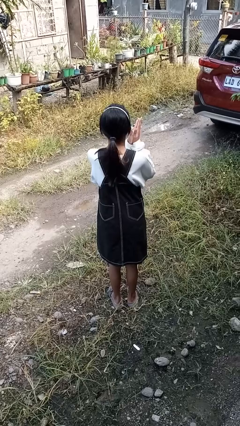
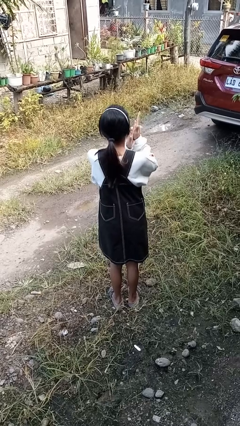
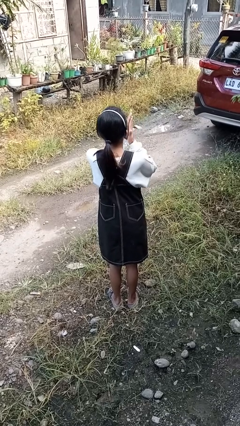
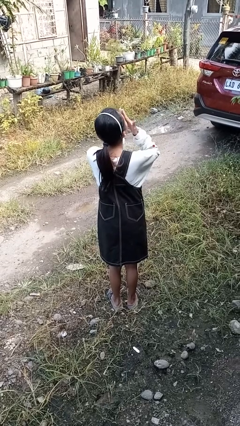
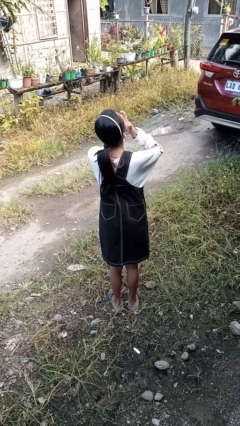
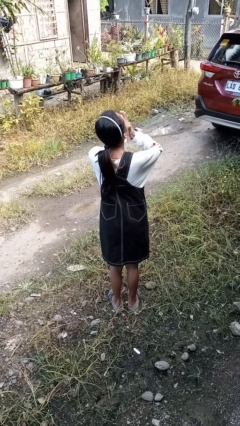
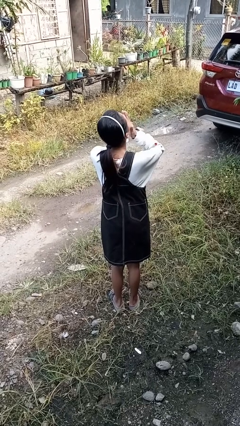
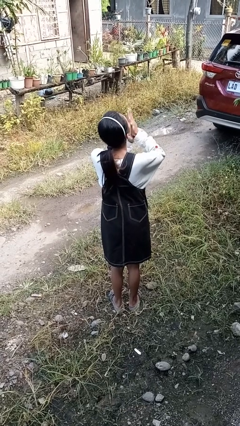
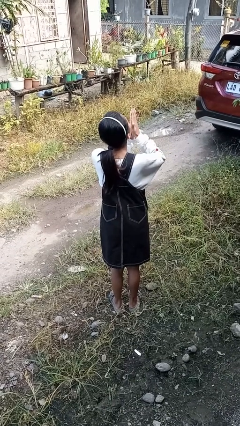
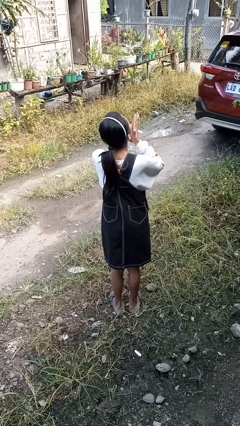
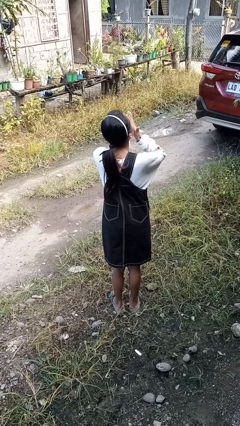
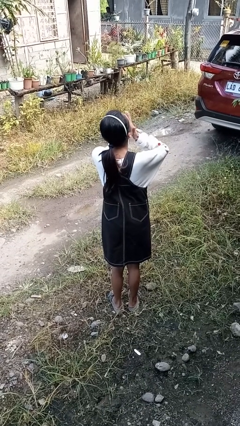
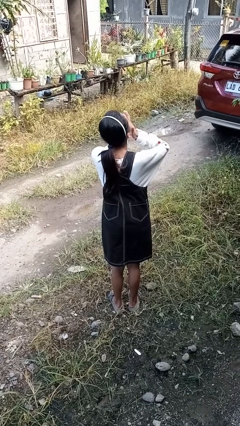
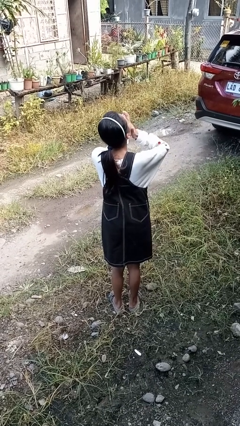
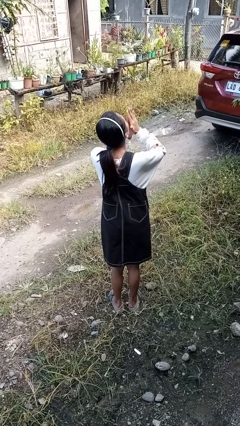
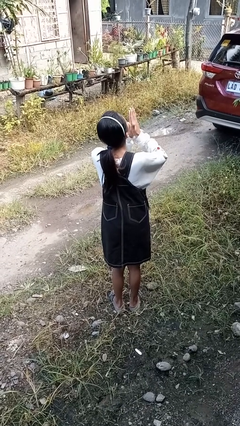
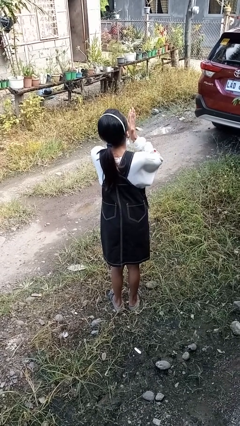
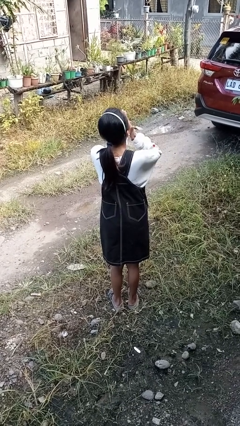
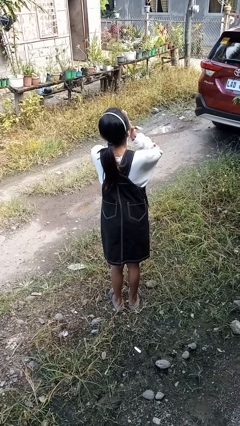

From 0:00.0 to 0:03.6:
person blows into hands

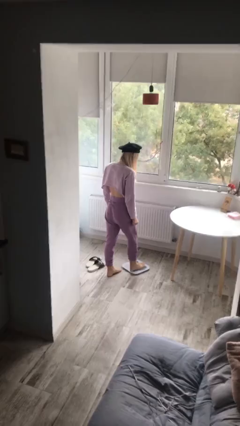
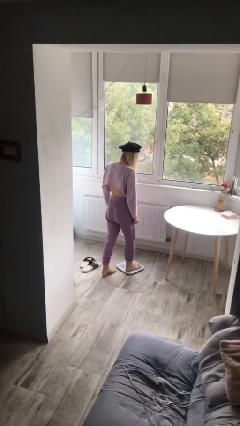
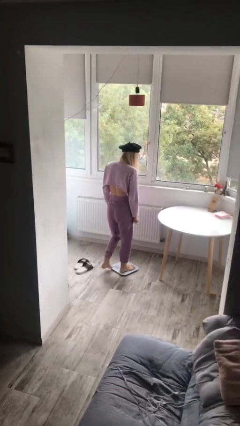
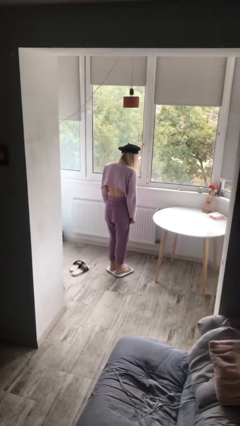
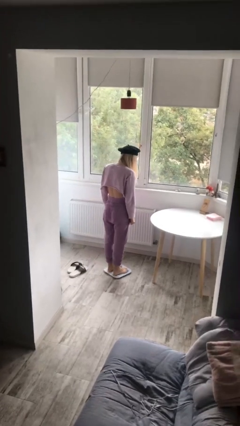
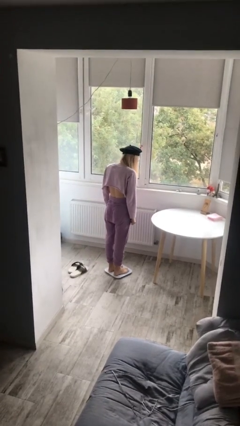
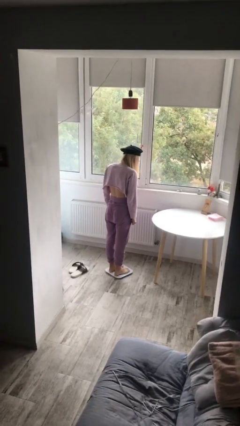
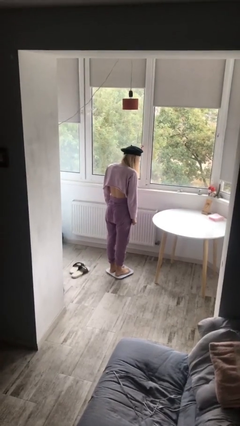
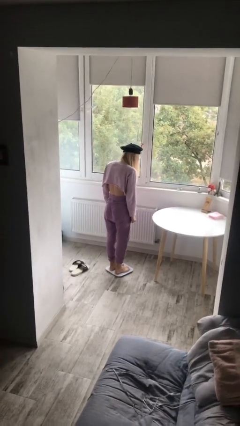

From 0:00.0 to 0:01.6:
person uses bodyweight scale

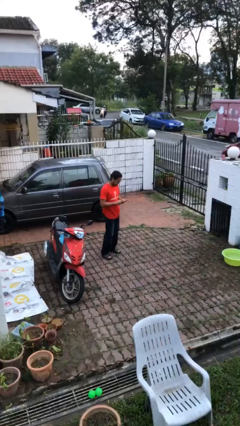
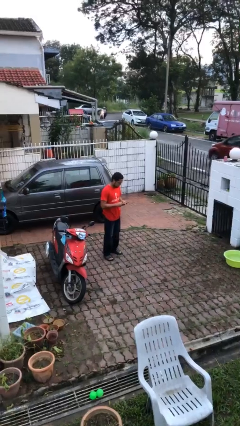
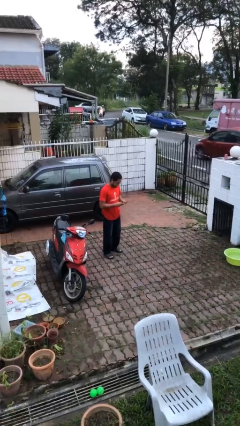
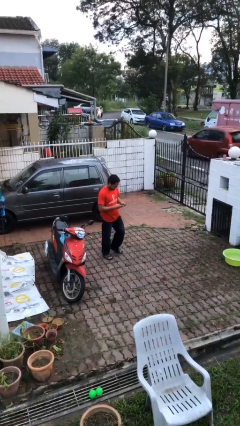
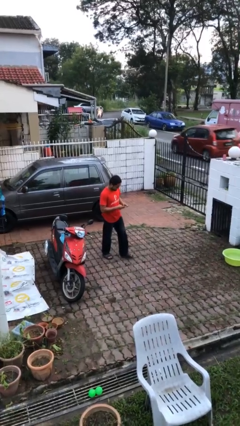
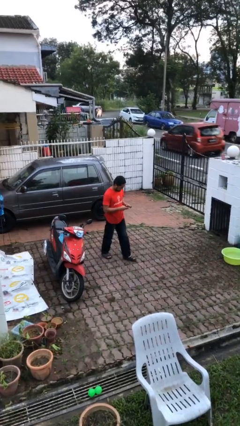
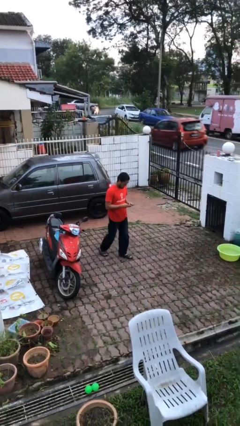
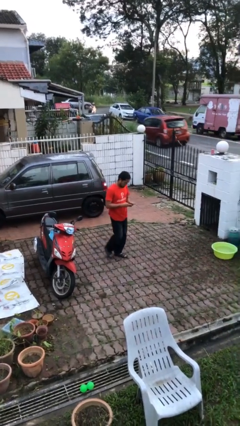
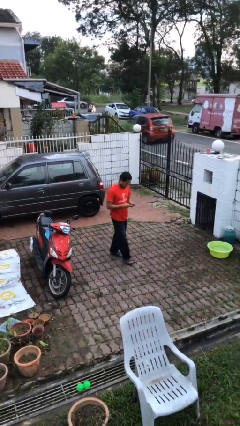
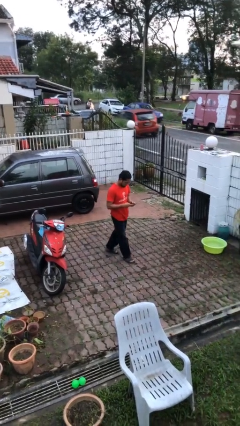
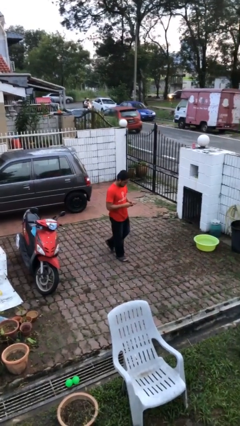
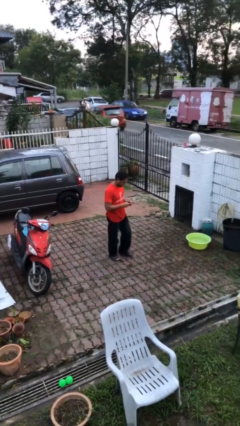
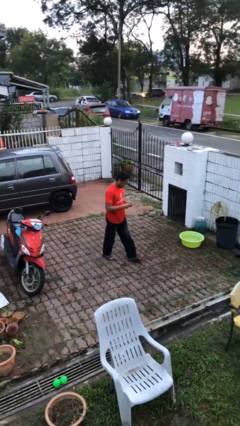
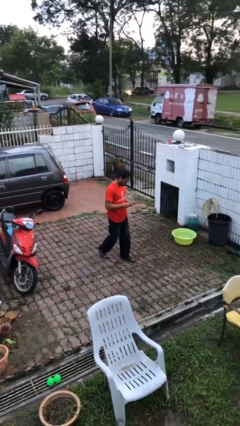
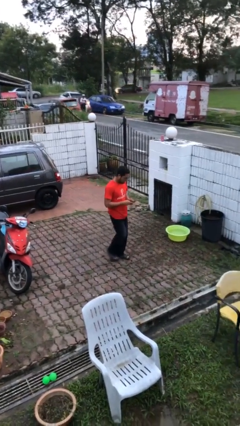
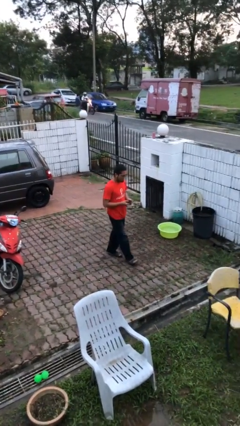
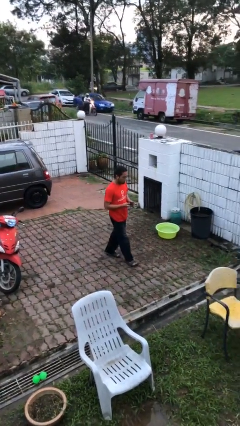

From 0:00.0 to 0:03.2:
person texts on phone

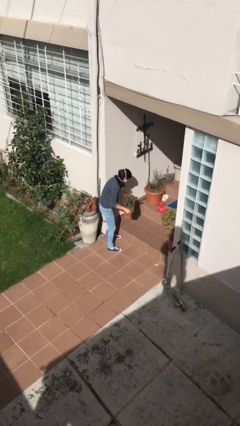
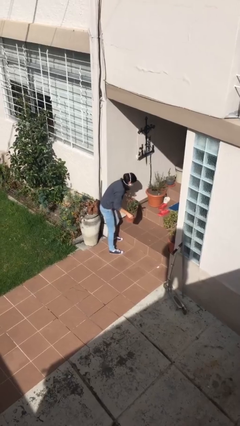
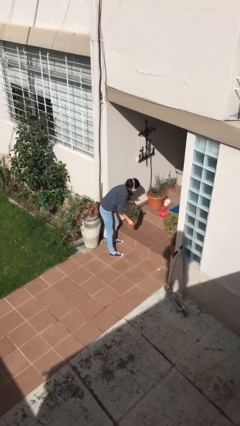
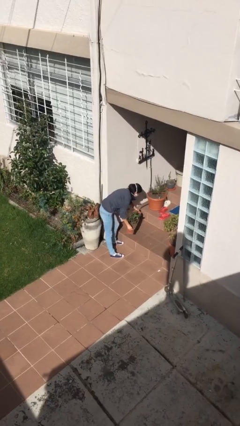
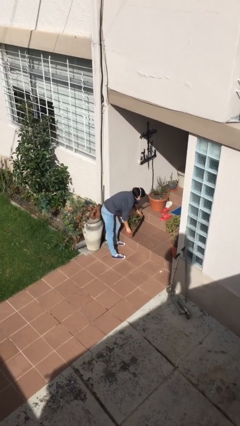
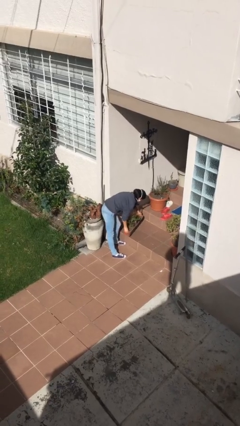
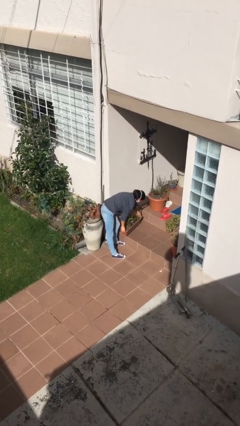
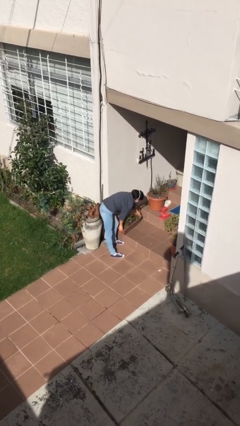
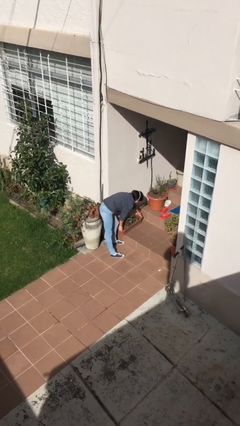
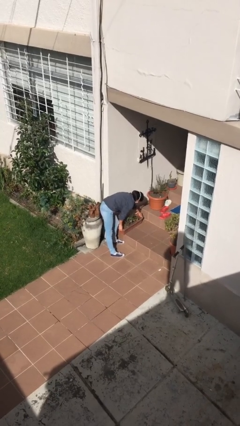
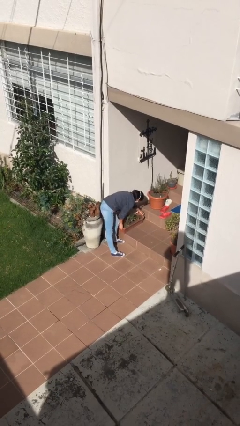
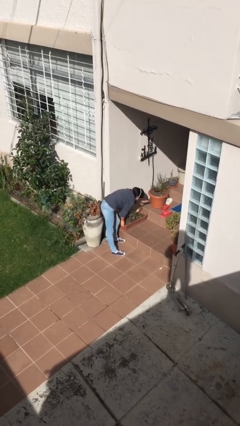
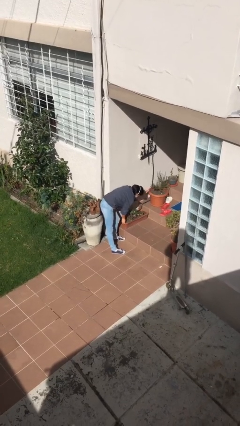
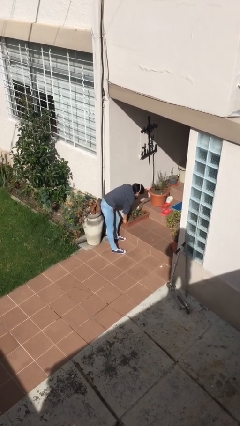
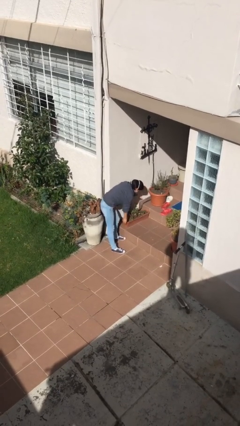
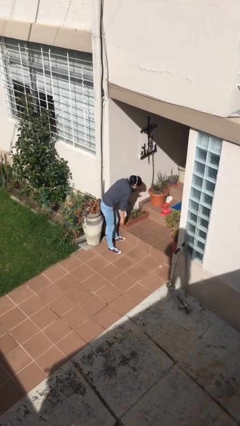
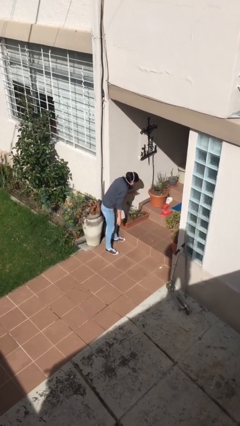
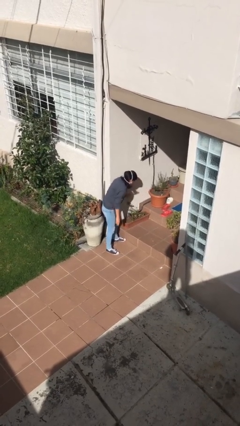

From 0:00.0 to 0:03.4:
person puts down object on floor

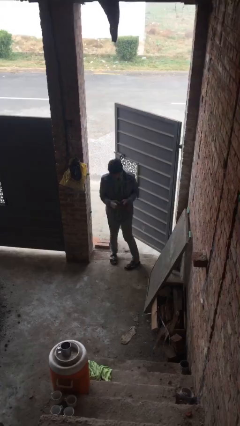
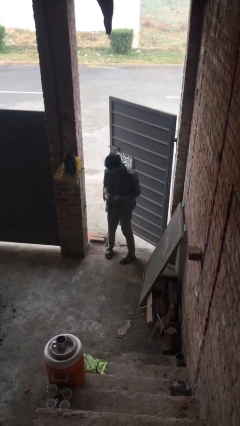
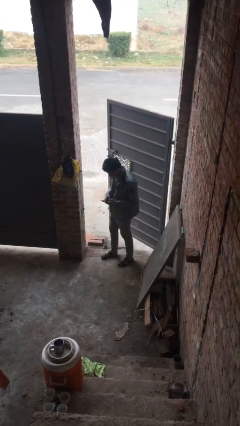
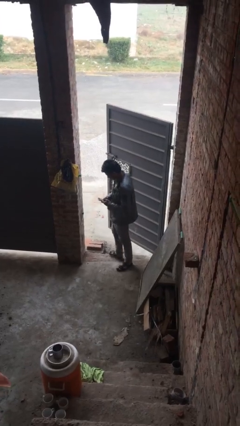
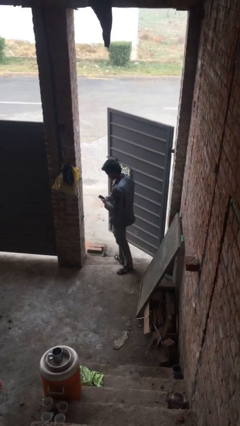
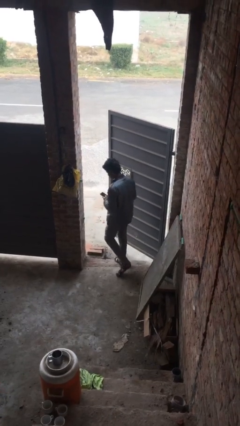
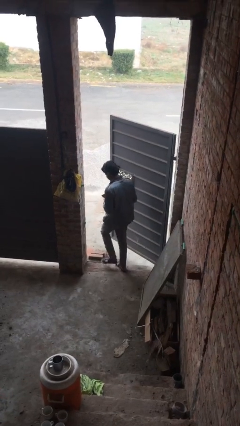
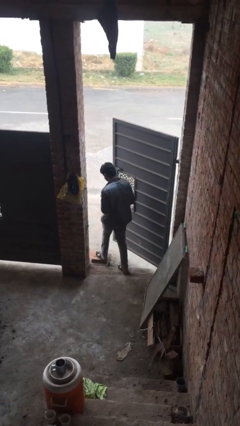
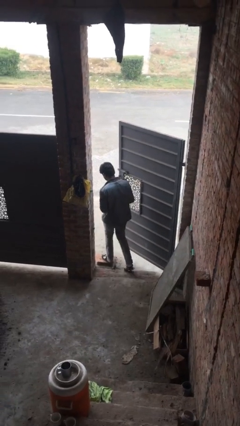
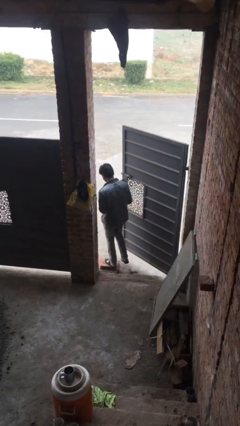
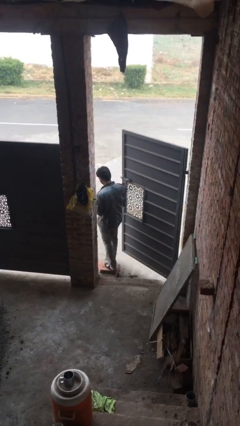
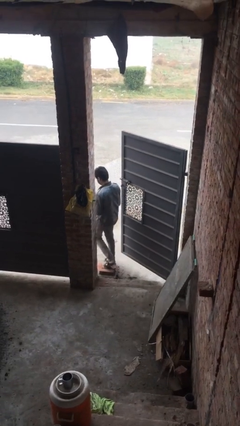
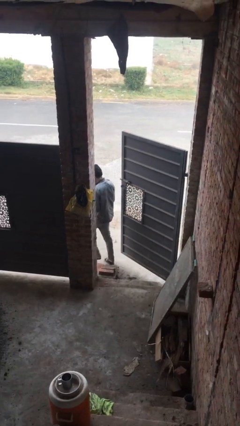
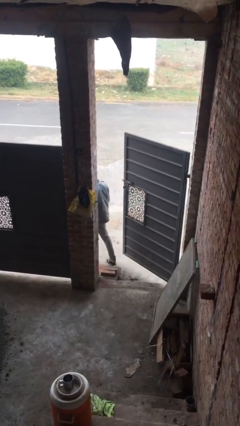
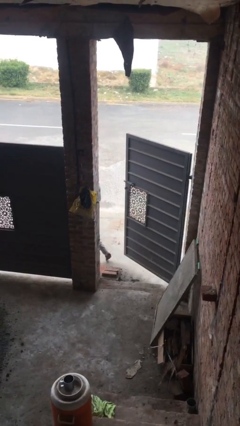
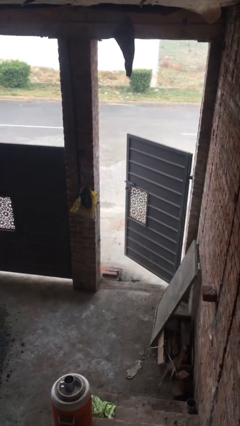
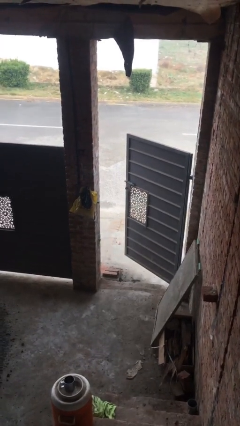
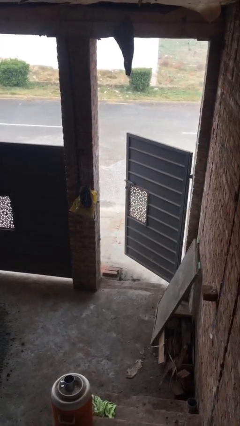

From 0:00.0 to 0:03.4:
person exits scene through structure

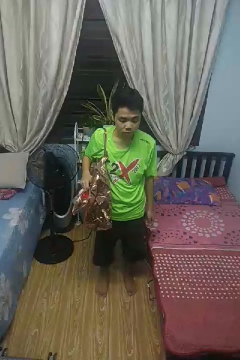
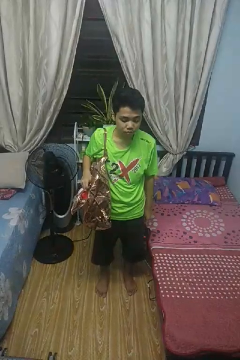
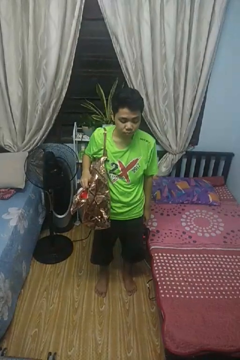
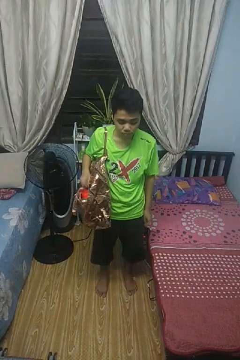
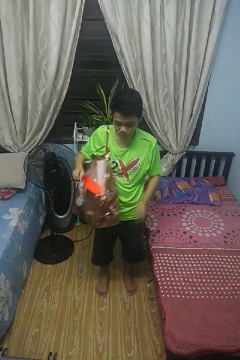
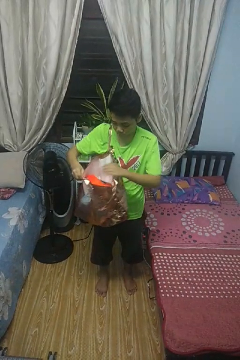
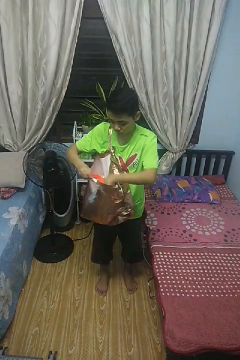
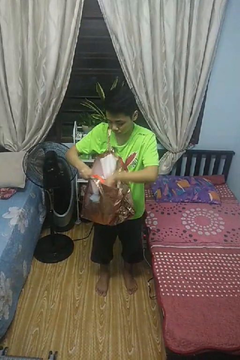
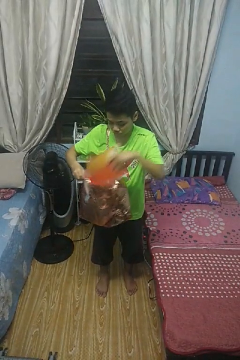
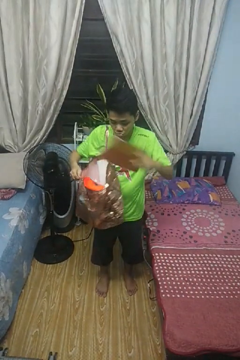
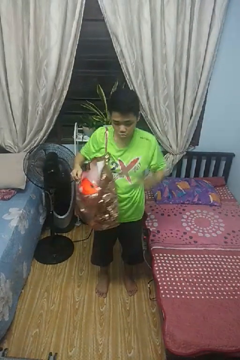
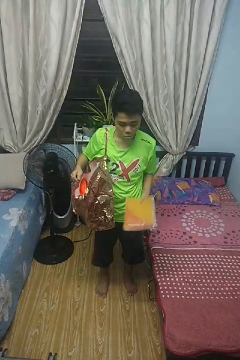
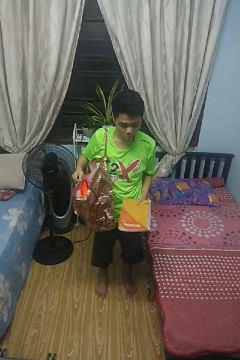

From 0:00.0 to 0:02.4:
person takes object from bag
